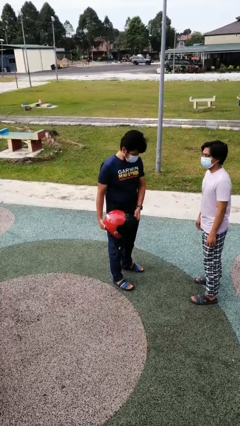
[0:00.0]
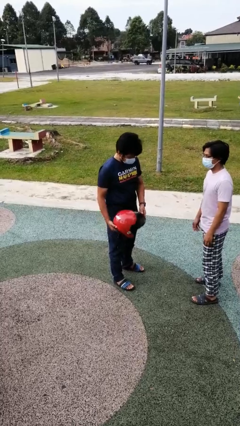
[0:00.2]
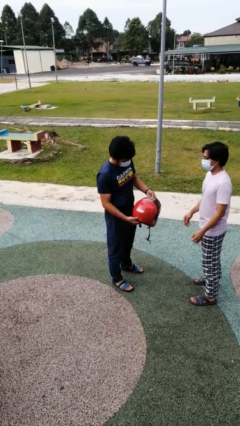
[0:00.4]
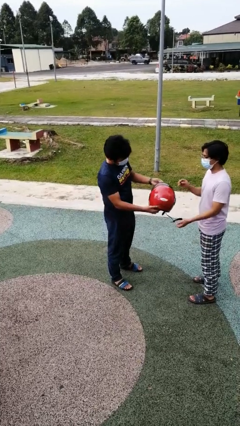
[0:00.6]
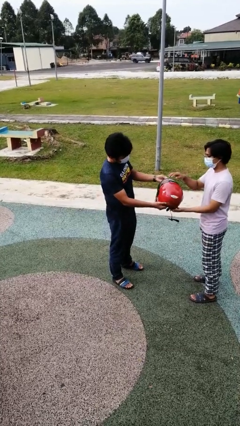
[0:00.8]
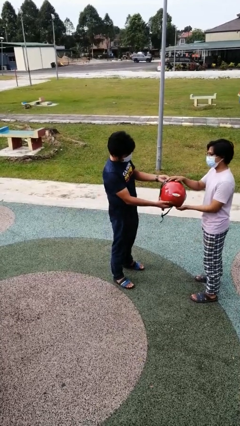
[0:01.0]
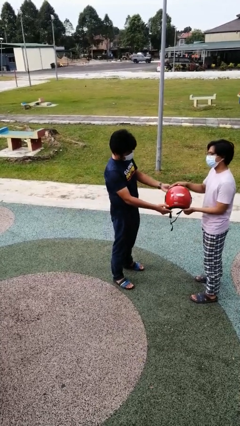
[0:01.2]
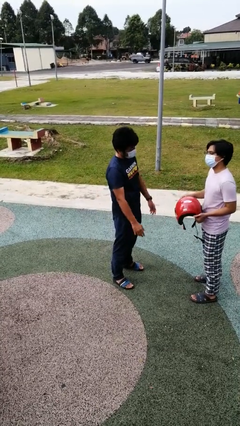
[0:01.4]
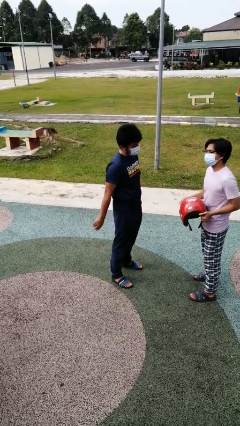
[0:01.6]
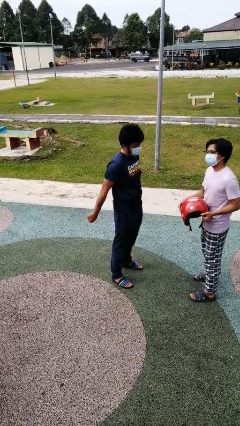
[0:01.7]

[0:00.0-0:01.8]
person transfers object to person

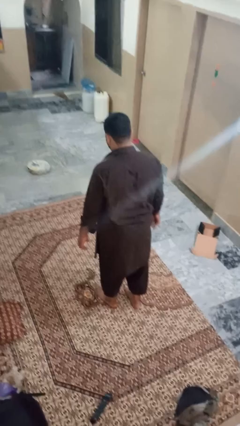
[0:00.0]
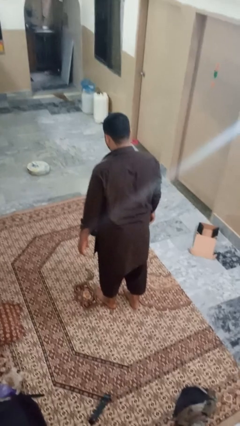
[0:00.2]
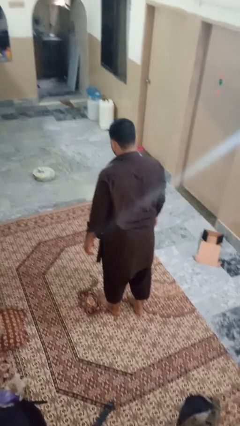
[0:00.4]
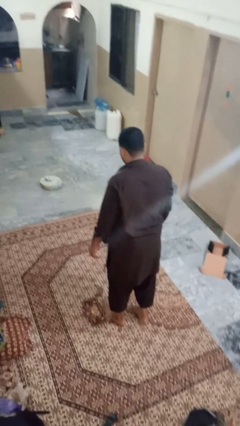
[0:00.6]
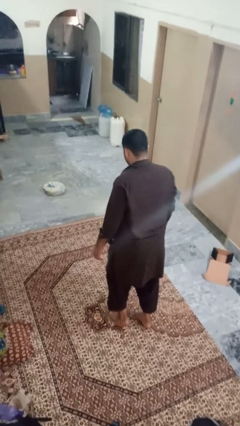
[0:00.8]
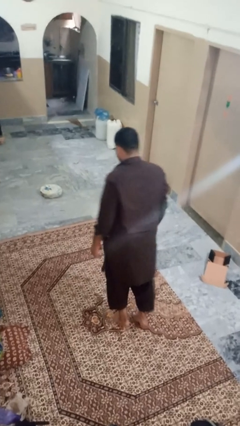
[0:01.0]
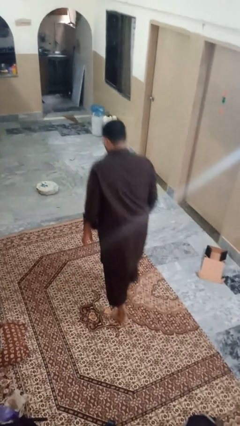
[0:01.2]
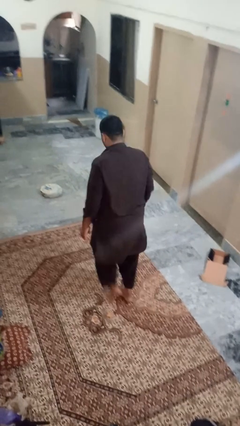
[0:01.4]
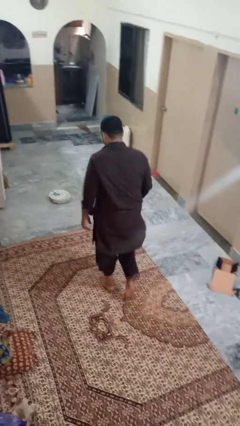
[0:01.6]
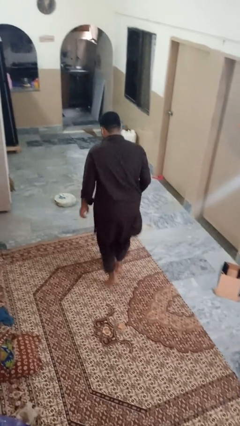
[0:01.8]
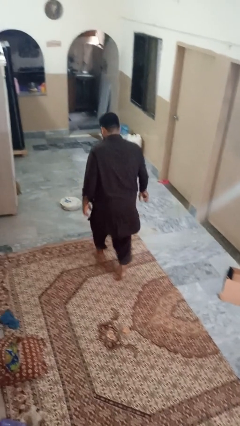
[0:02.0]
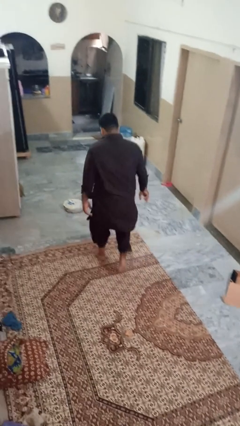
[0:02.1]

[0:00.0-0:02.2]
person walks tiptoe

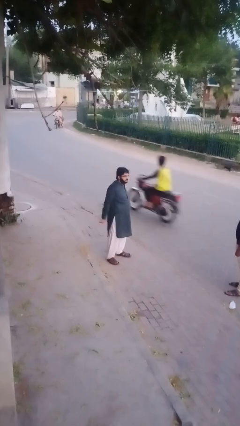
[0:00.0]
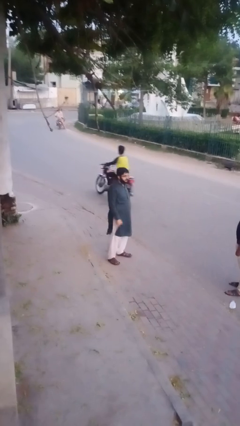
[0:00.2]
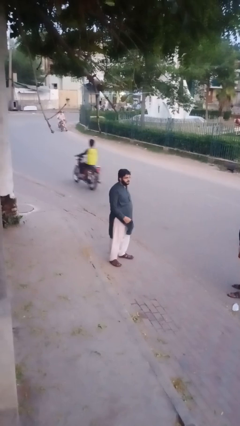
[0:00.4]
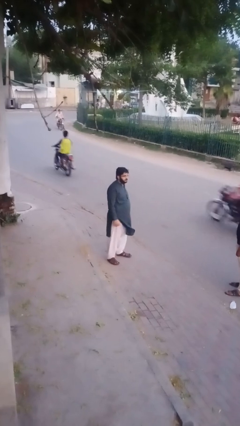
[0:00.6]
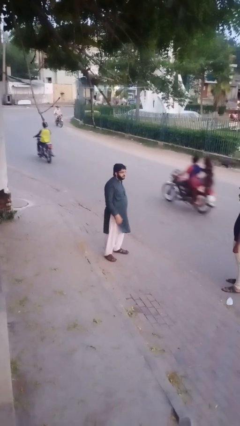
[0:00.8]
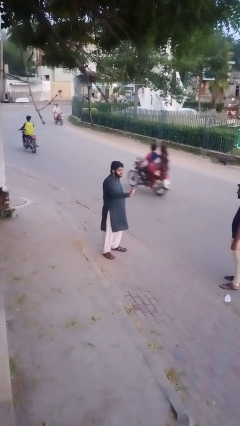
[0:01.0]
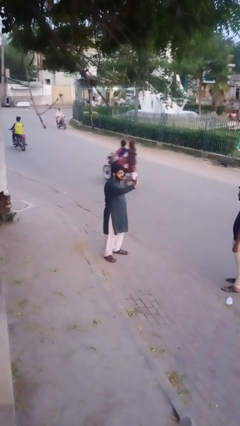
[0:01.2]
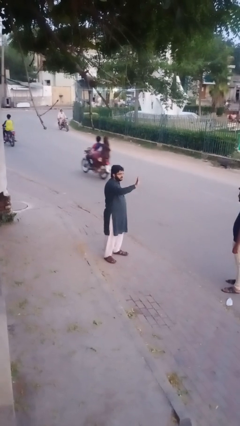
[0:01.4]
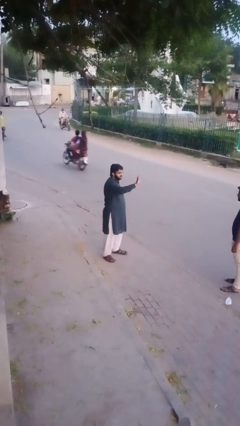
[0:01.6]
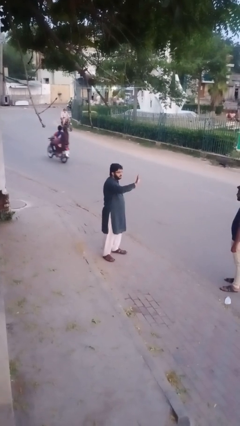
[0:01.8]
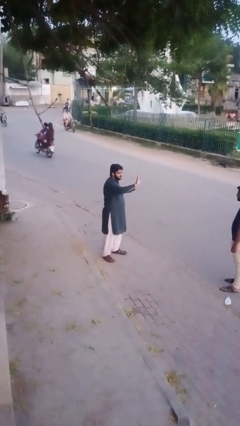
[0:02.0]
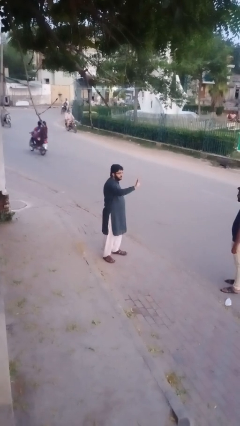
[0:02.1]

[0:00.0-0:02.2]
person waves at person

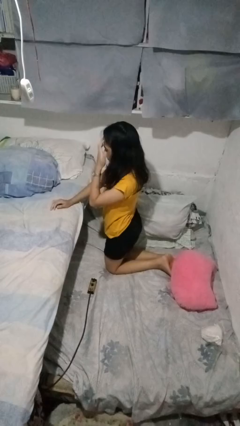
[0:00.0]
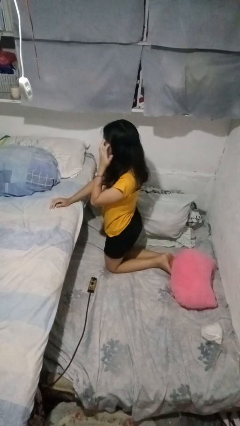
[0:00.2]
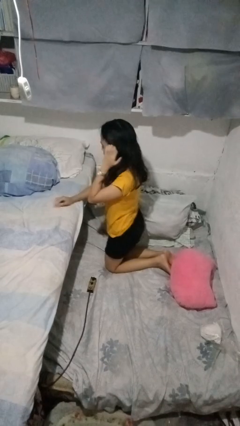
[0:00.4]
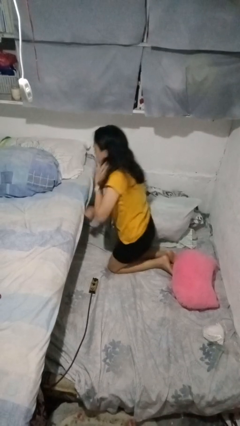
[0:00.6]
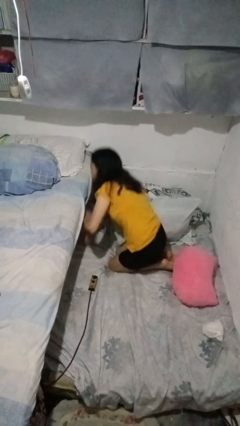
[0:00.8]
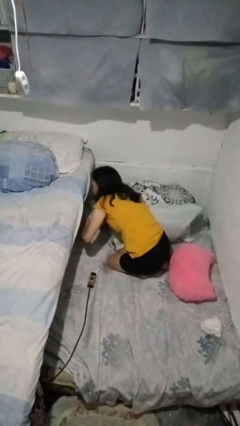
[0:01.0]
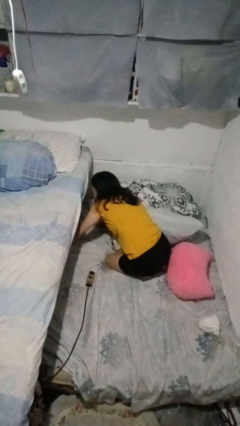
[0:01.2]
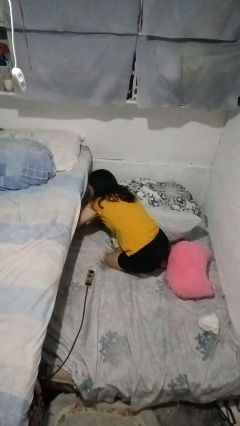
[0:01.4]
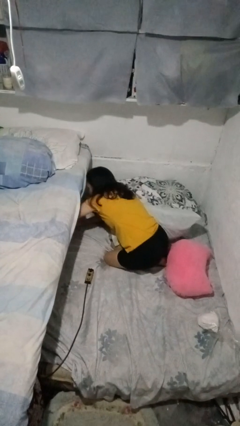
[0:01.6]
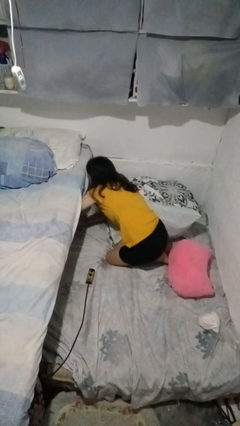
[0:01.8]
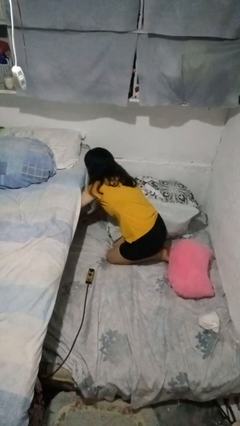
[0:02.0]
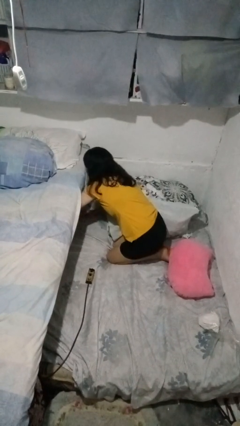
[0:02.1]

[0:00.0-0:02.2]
person searches under bed

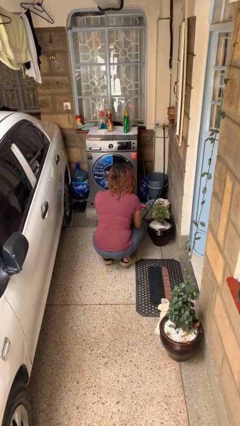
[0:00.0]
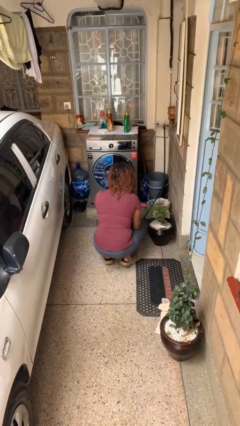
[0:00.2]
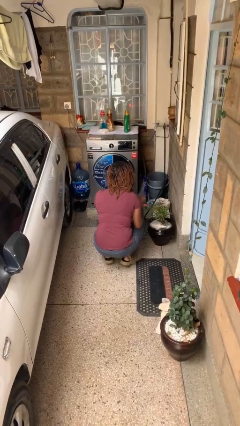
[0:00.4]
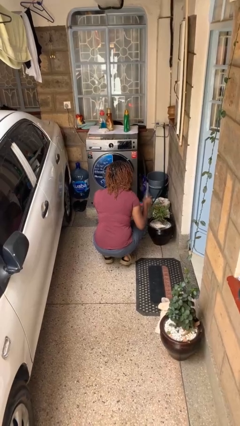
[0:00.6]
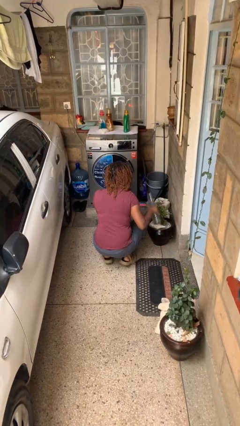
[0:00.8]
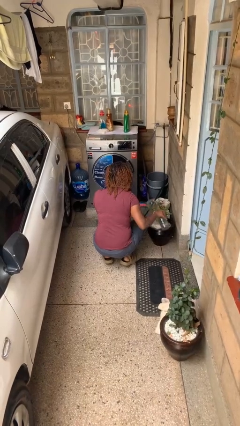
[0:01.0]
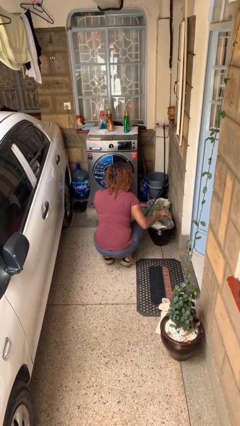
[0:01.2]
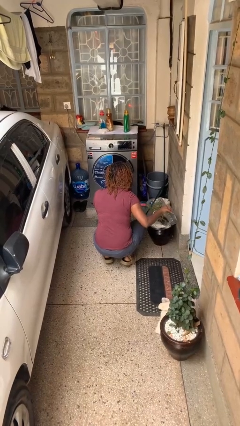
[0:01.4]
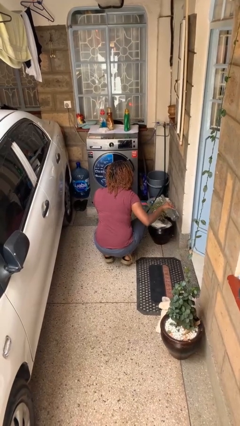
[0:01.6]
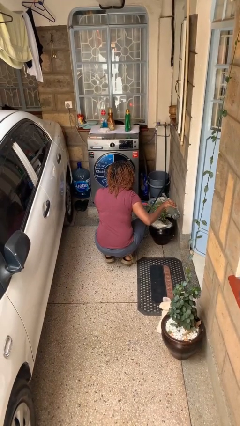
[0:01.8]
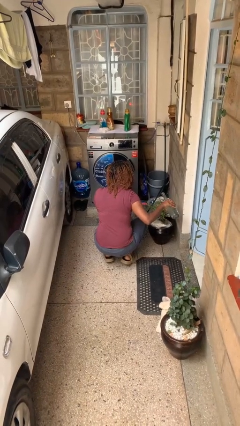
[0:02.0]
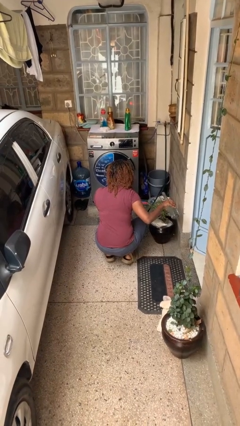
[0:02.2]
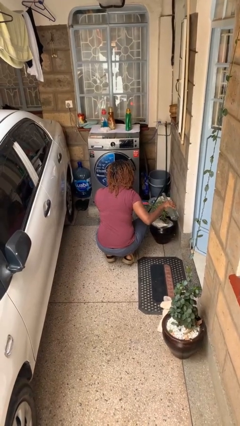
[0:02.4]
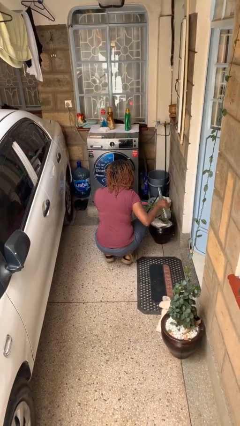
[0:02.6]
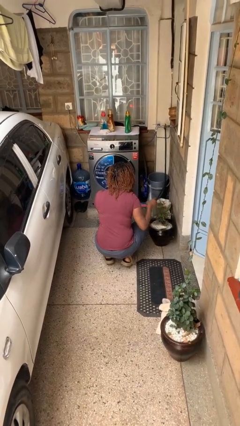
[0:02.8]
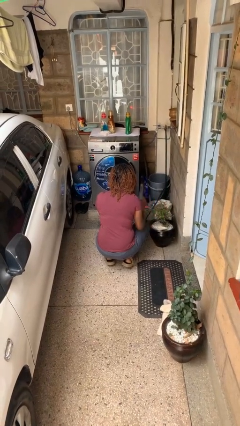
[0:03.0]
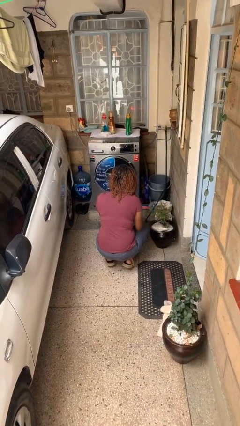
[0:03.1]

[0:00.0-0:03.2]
person waters houseplant

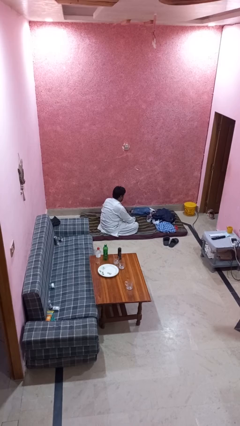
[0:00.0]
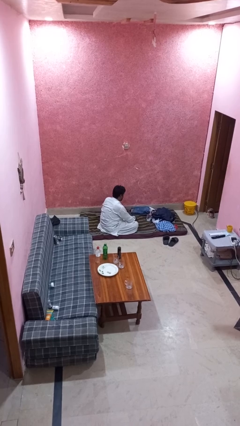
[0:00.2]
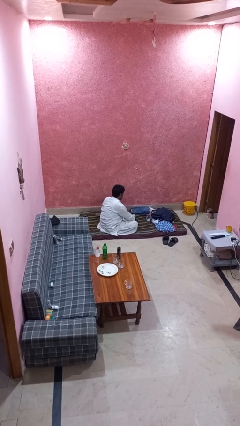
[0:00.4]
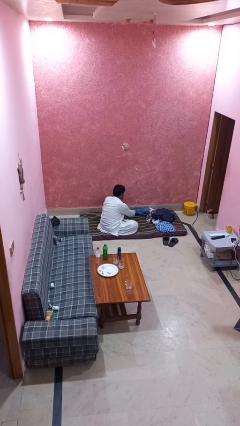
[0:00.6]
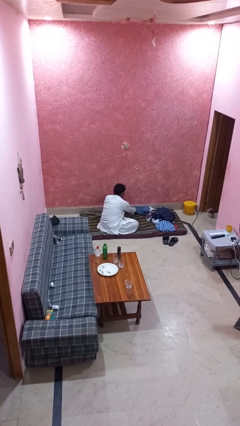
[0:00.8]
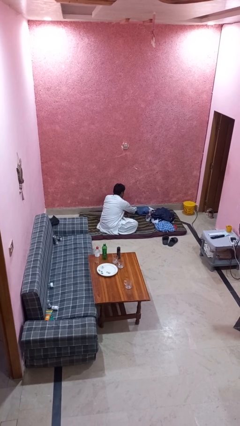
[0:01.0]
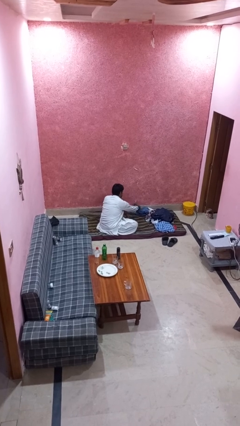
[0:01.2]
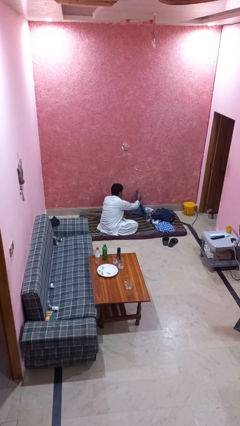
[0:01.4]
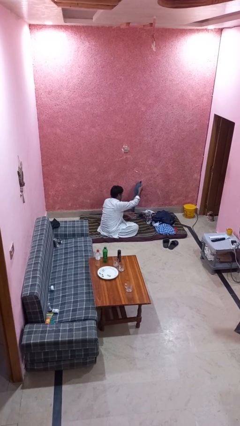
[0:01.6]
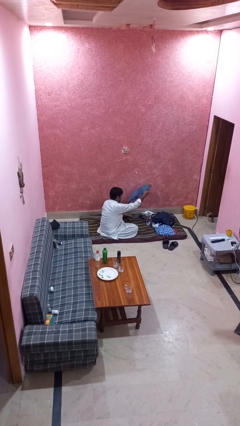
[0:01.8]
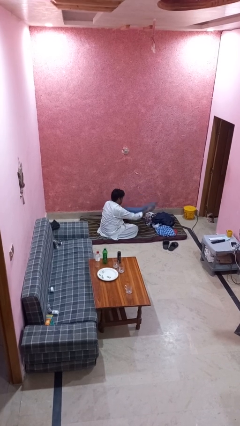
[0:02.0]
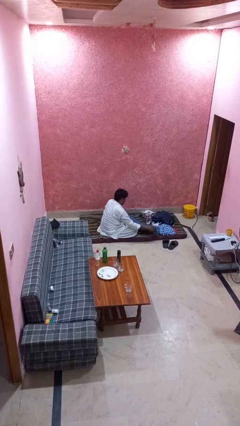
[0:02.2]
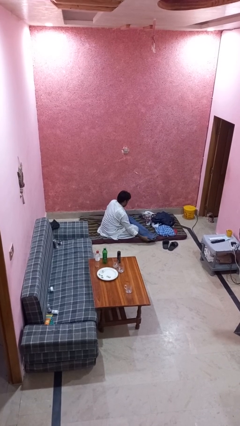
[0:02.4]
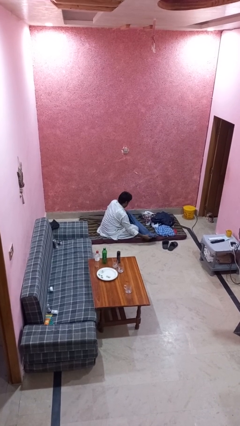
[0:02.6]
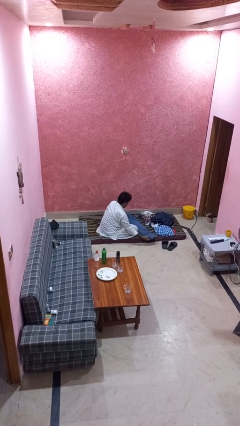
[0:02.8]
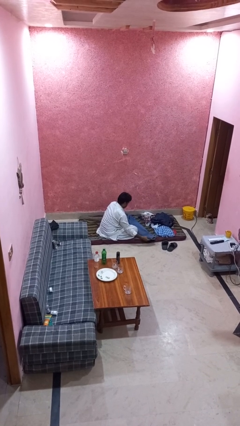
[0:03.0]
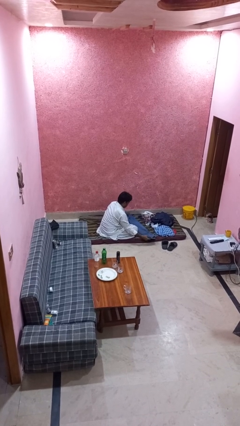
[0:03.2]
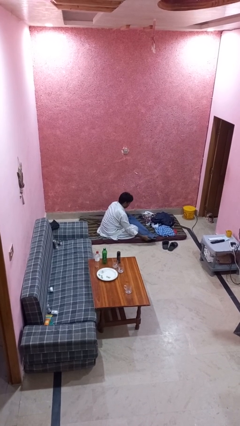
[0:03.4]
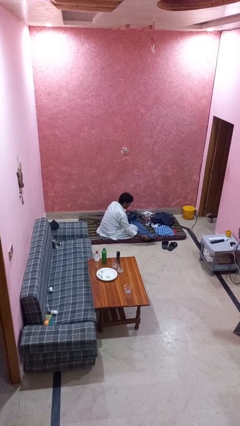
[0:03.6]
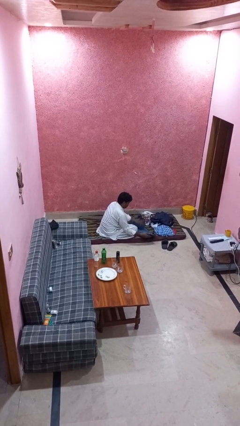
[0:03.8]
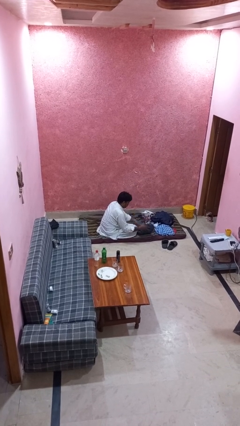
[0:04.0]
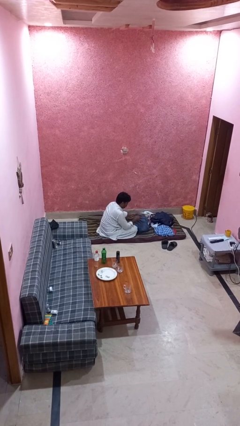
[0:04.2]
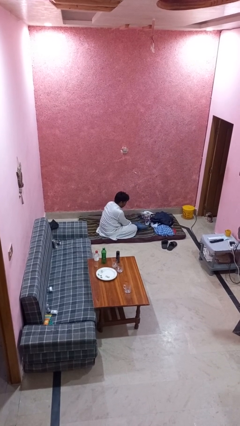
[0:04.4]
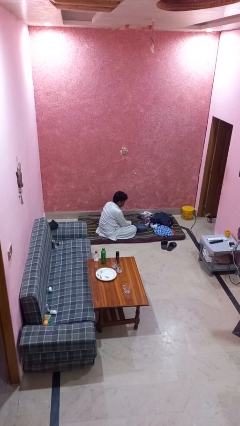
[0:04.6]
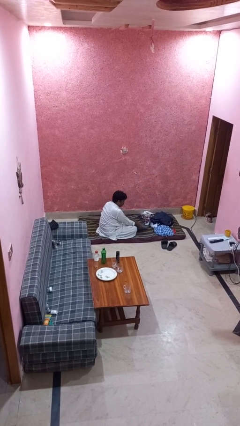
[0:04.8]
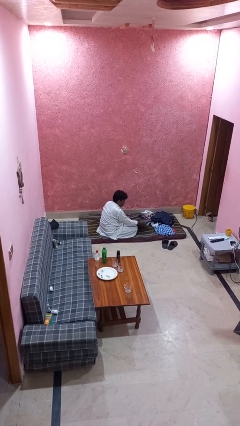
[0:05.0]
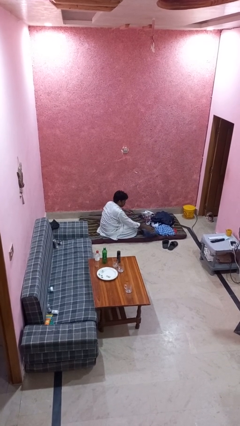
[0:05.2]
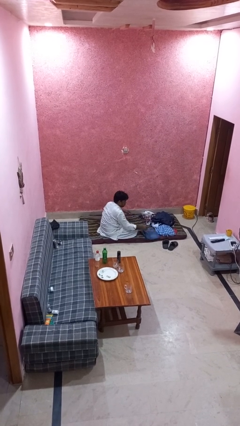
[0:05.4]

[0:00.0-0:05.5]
person folds pants

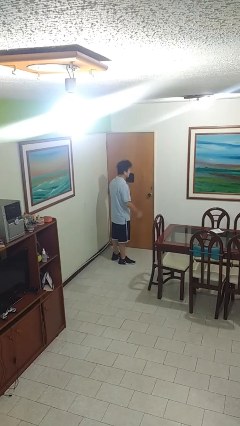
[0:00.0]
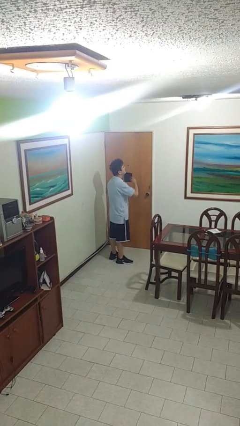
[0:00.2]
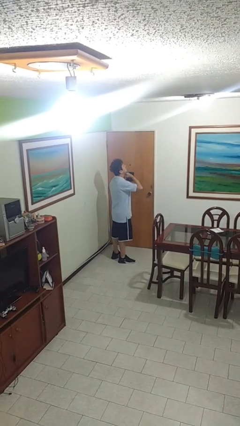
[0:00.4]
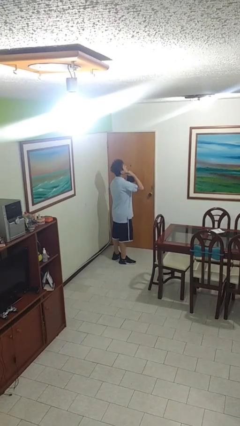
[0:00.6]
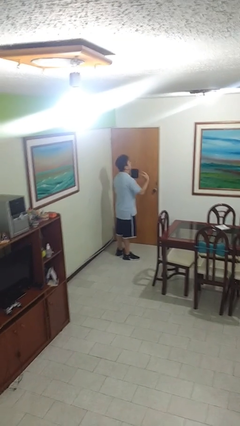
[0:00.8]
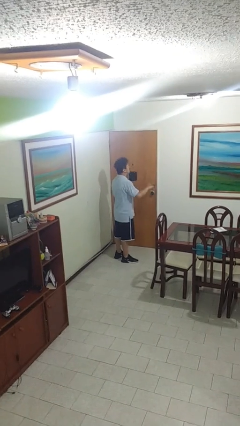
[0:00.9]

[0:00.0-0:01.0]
person gestures cut
